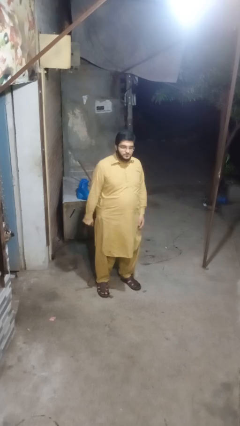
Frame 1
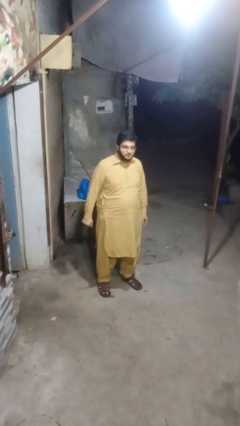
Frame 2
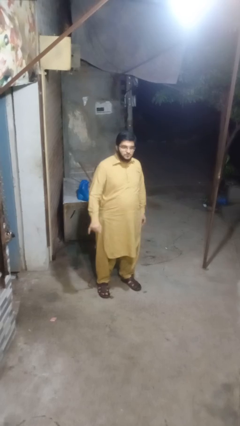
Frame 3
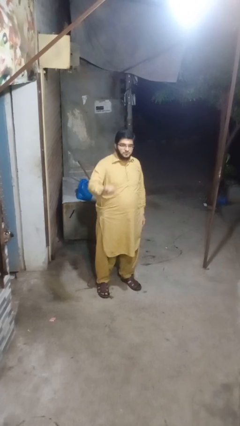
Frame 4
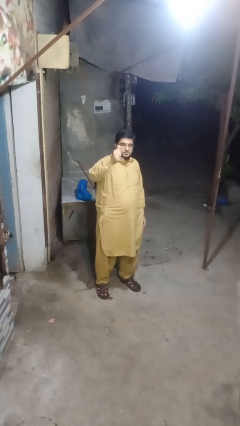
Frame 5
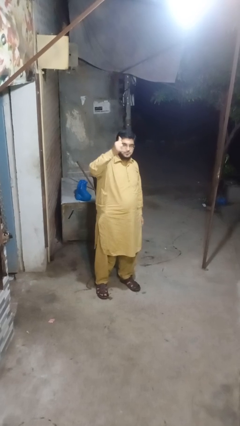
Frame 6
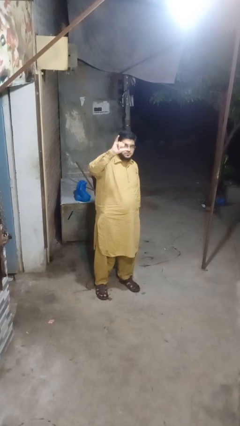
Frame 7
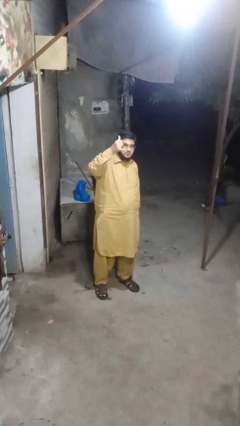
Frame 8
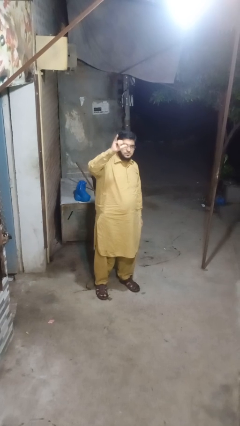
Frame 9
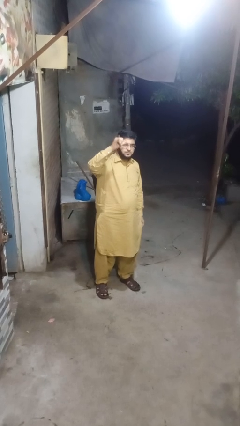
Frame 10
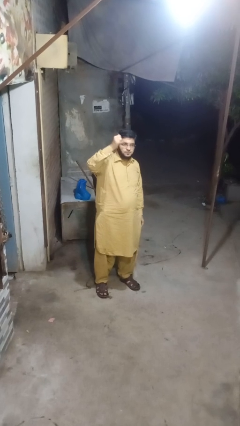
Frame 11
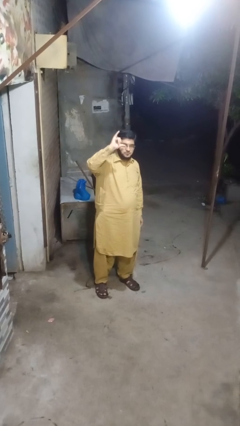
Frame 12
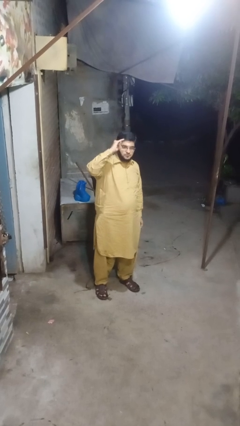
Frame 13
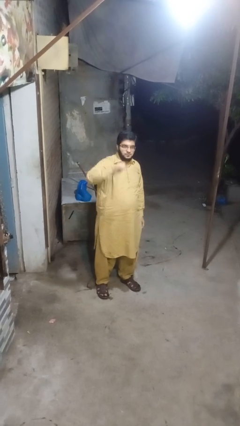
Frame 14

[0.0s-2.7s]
person gestures hang loose

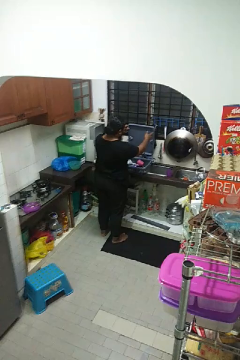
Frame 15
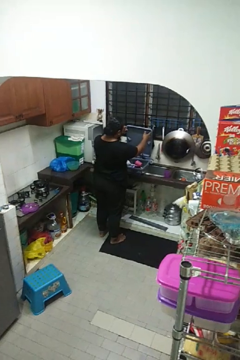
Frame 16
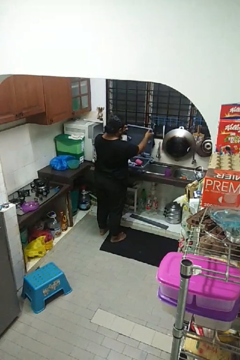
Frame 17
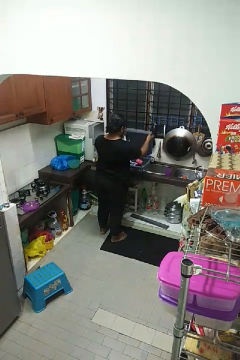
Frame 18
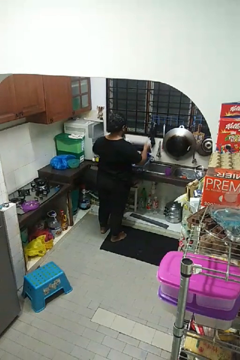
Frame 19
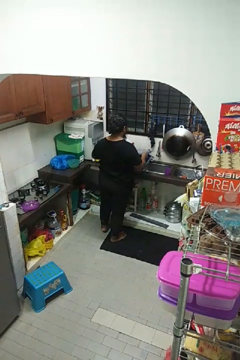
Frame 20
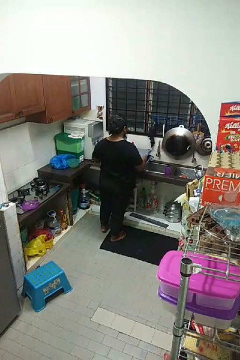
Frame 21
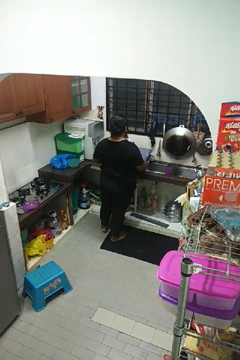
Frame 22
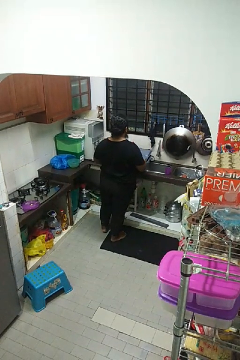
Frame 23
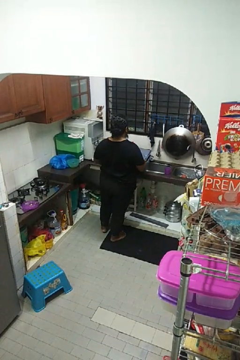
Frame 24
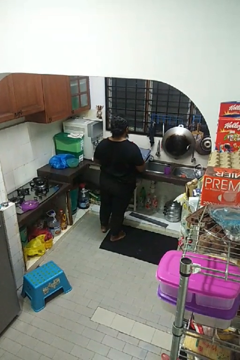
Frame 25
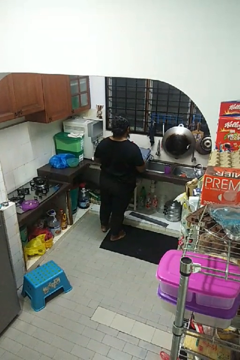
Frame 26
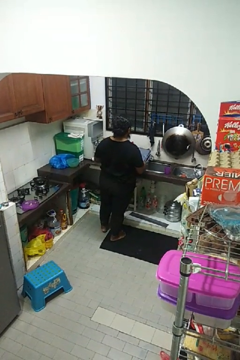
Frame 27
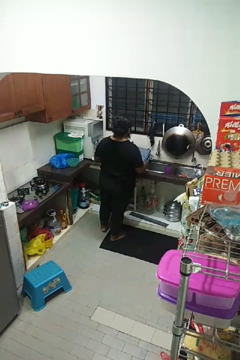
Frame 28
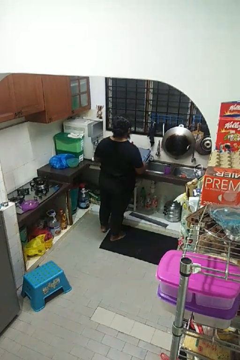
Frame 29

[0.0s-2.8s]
person closes dishwasher

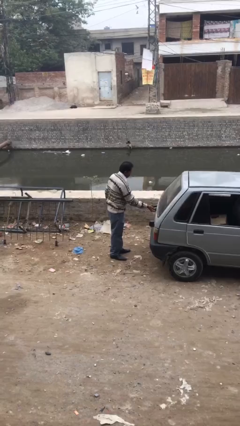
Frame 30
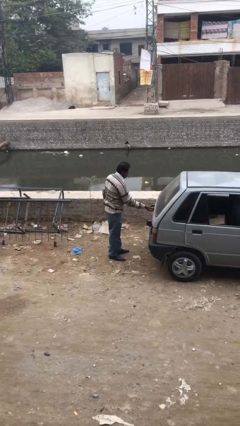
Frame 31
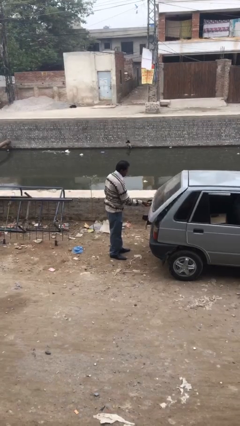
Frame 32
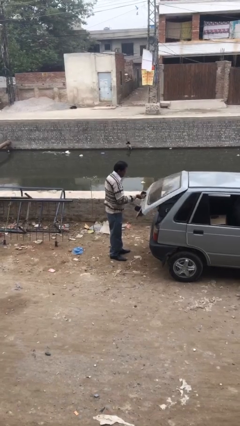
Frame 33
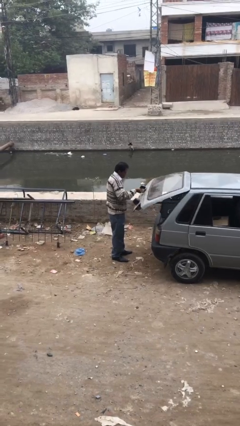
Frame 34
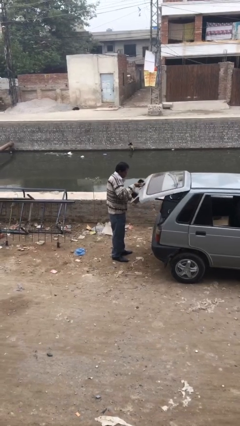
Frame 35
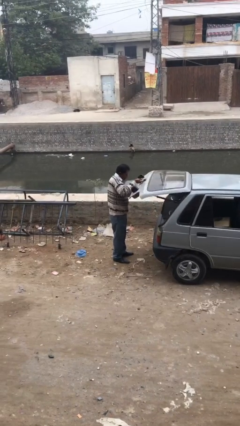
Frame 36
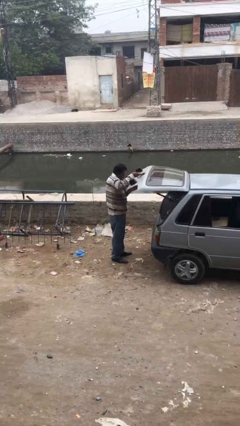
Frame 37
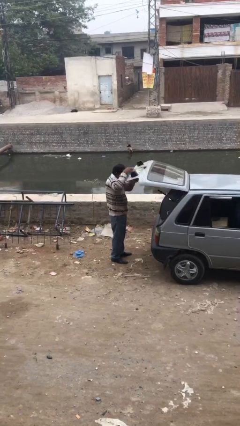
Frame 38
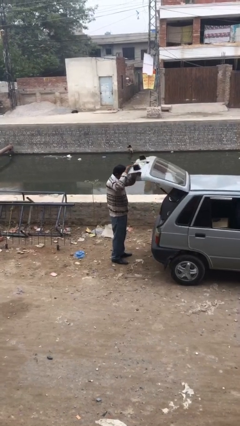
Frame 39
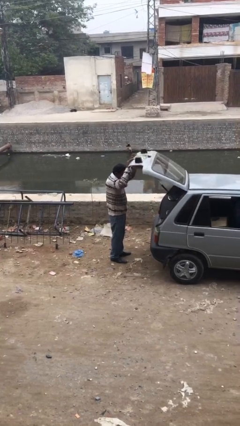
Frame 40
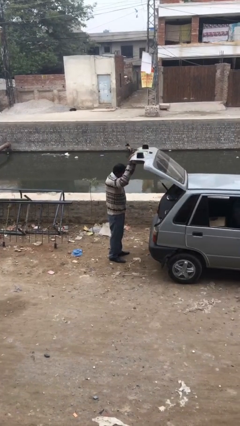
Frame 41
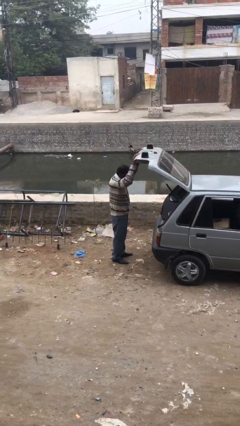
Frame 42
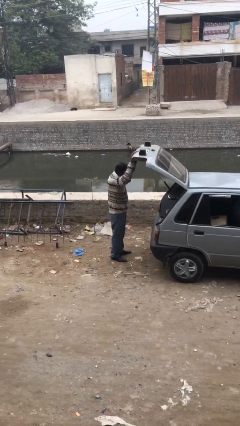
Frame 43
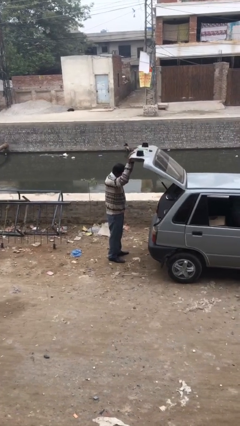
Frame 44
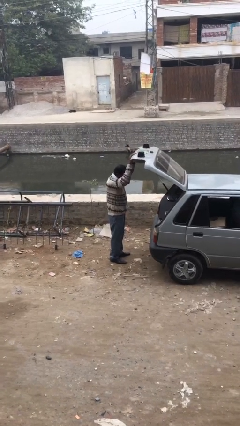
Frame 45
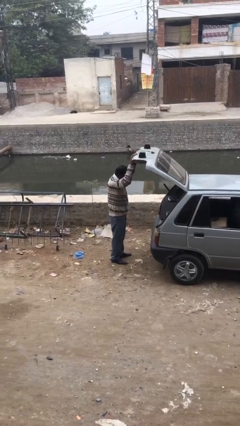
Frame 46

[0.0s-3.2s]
person opens car trunk

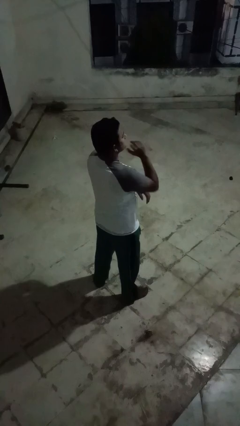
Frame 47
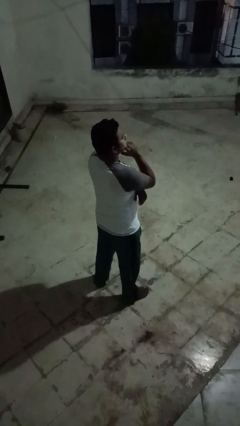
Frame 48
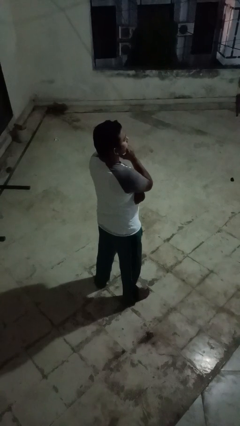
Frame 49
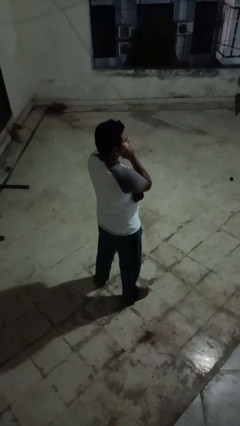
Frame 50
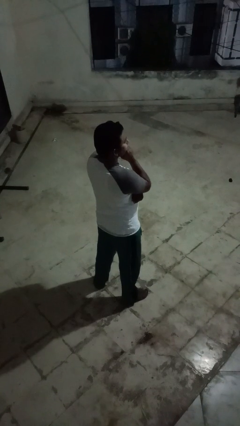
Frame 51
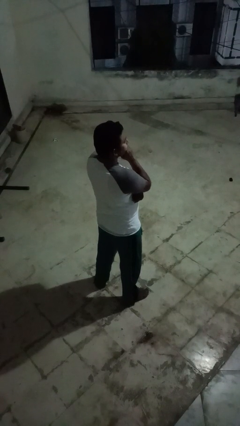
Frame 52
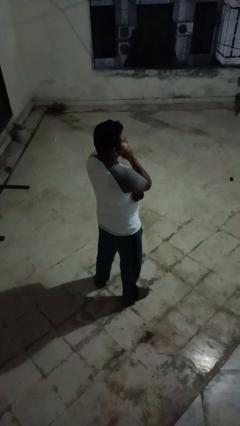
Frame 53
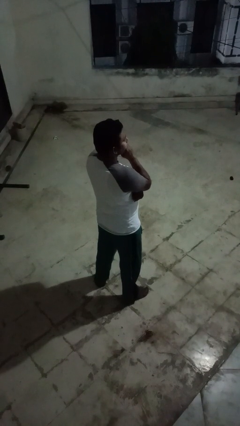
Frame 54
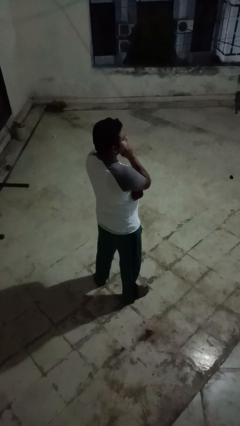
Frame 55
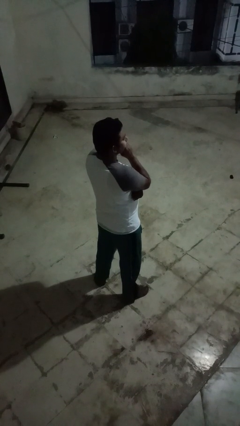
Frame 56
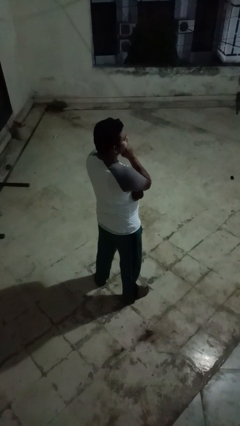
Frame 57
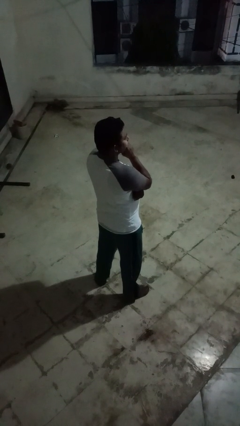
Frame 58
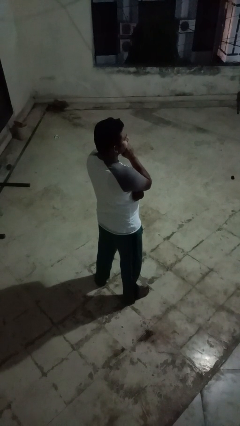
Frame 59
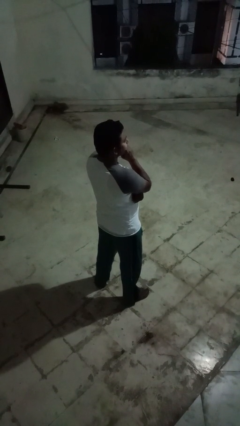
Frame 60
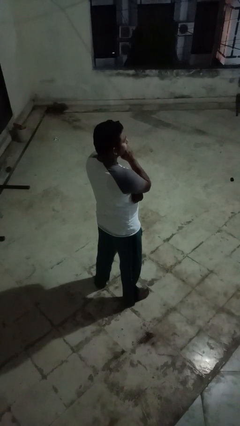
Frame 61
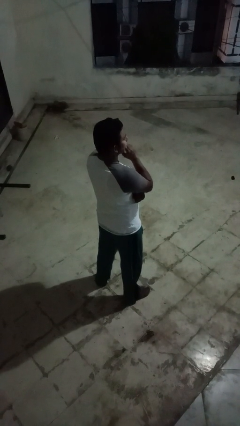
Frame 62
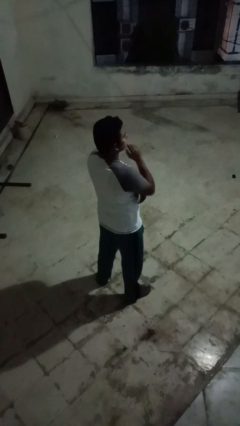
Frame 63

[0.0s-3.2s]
person strokes chin

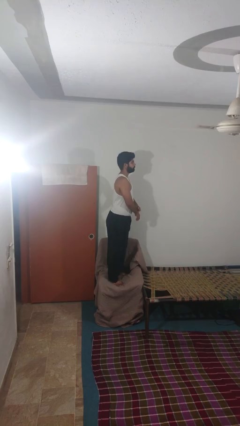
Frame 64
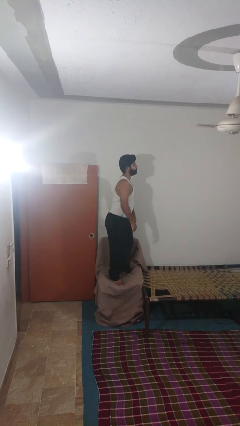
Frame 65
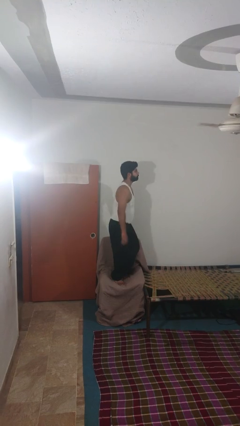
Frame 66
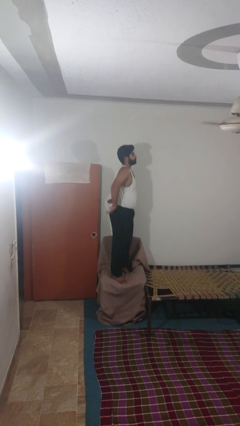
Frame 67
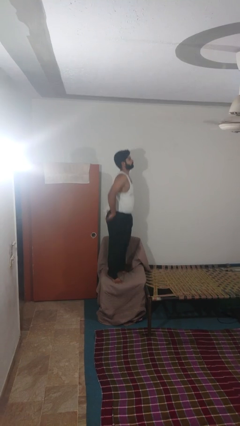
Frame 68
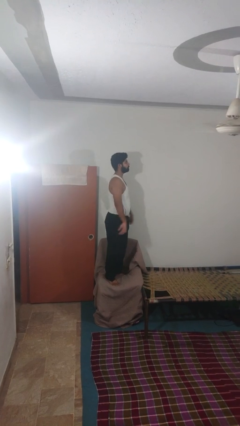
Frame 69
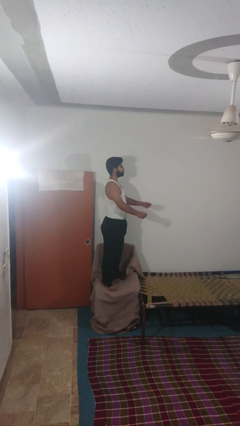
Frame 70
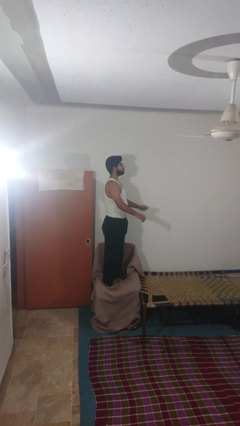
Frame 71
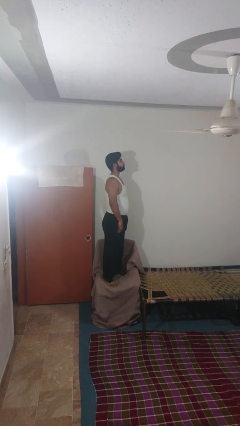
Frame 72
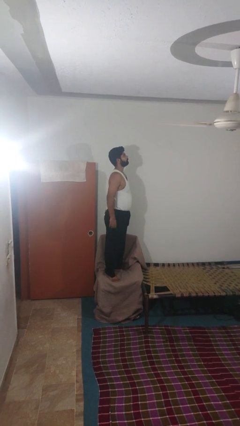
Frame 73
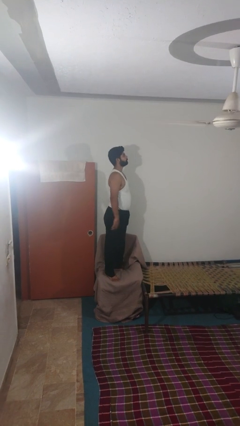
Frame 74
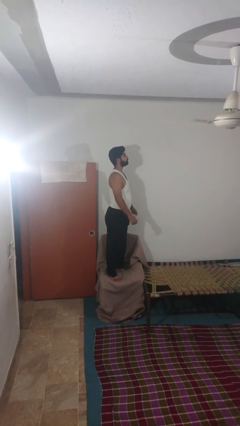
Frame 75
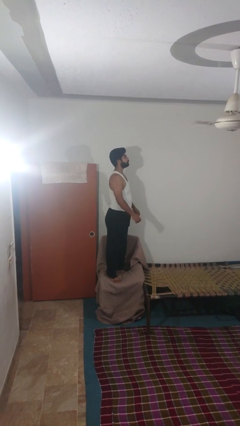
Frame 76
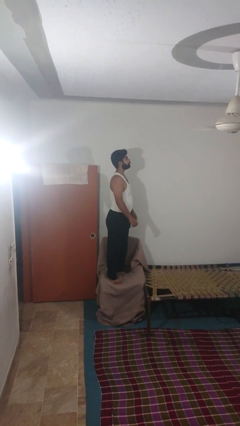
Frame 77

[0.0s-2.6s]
person jumps on couch

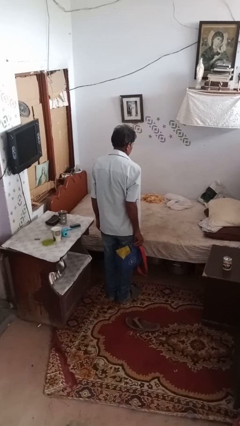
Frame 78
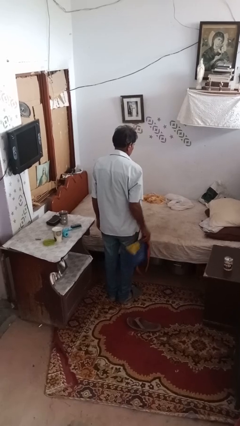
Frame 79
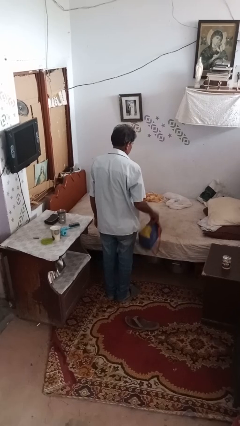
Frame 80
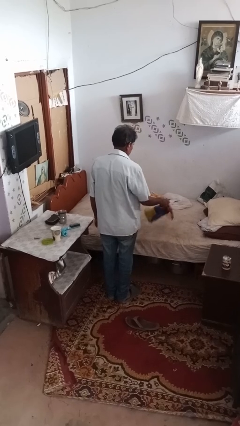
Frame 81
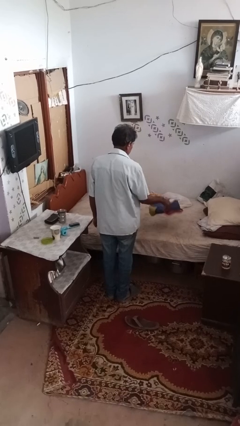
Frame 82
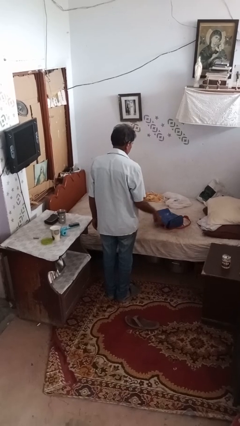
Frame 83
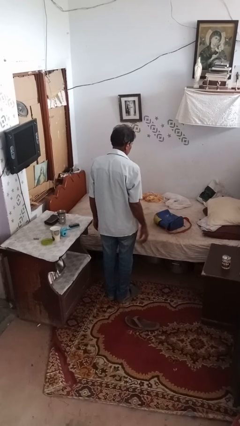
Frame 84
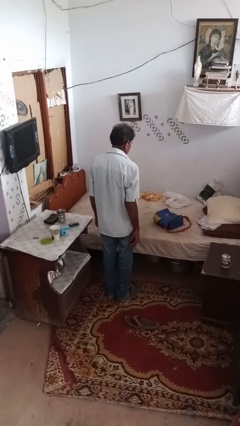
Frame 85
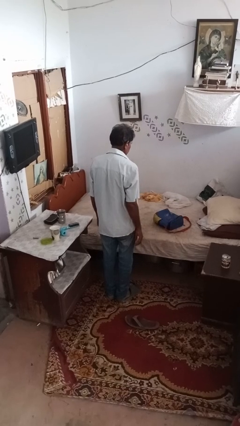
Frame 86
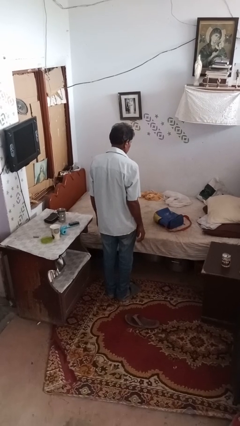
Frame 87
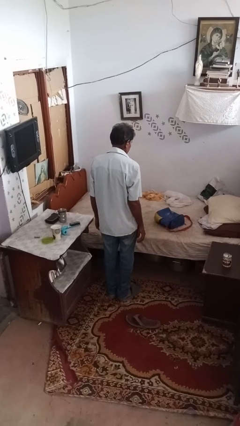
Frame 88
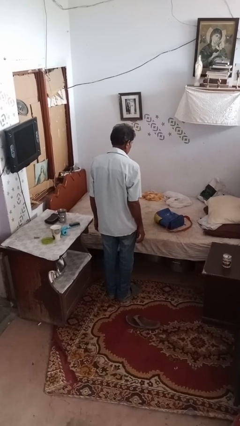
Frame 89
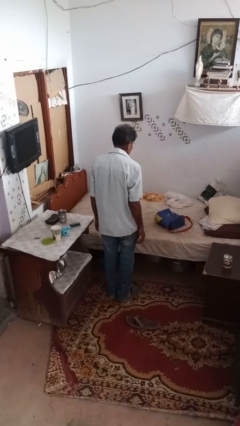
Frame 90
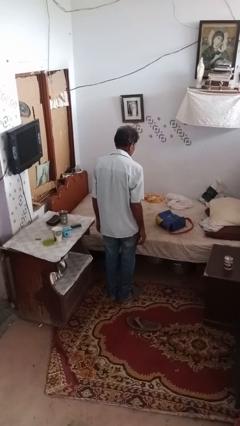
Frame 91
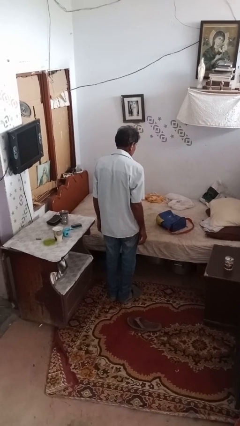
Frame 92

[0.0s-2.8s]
person throws object on bed

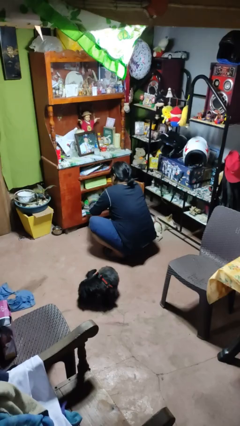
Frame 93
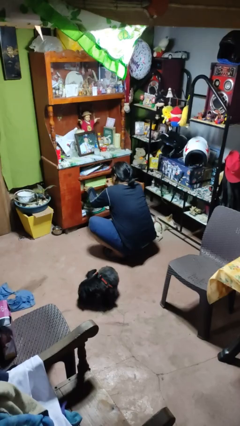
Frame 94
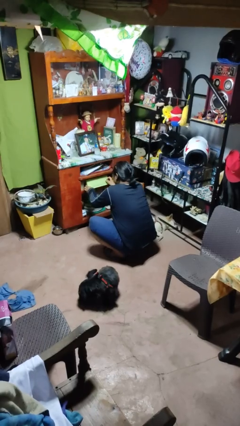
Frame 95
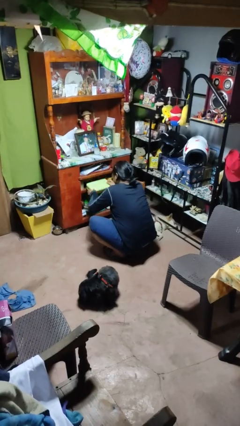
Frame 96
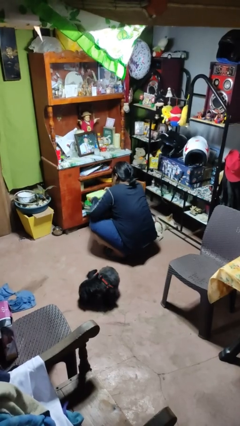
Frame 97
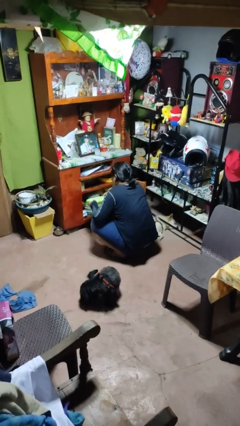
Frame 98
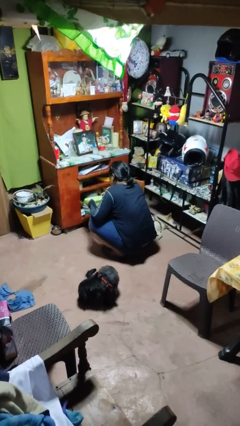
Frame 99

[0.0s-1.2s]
person picks up object from cabinet
